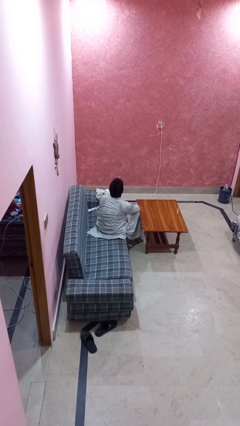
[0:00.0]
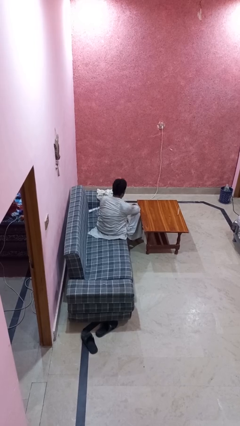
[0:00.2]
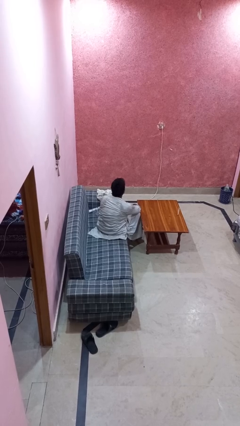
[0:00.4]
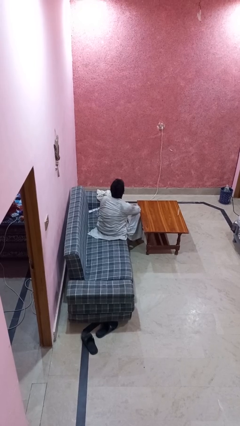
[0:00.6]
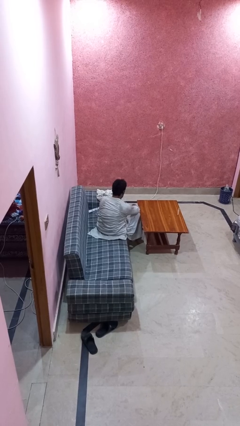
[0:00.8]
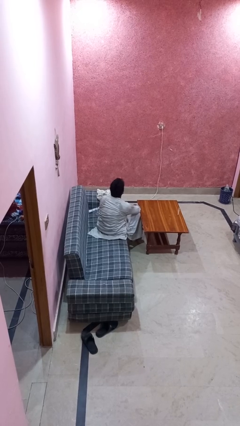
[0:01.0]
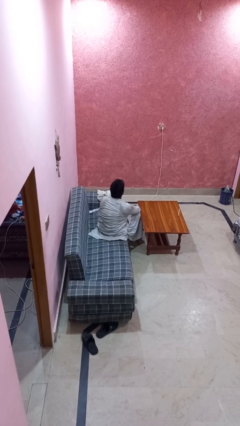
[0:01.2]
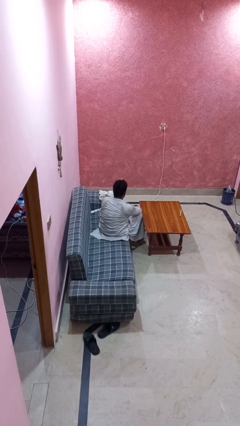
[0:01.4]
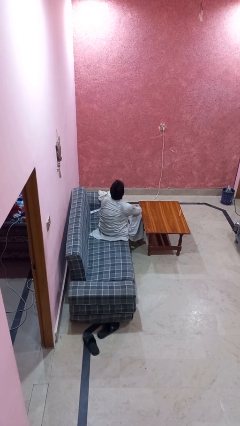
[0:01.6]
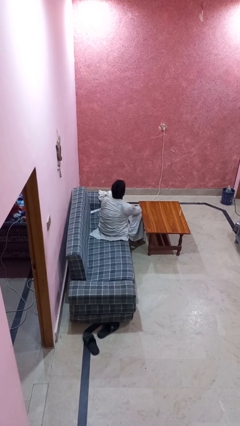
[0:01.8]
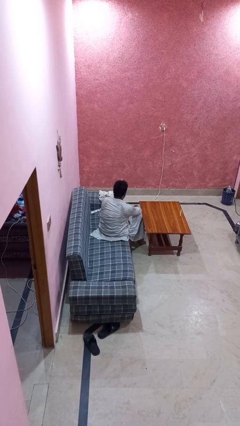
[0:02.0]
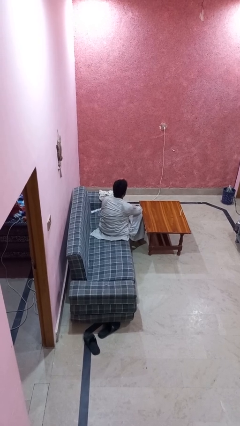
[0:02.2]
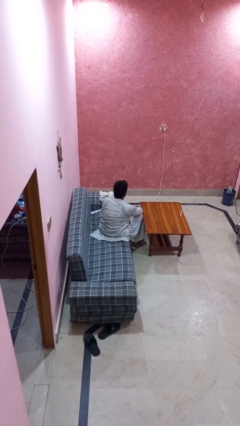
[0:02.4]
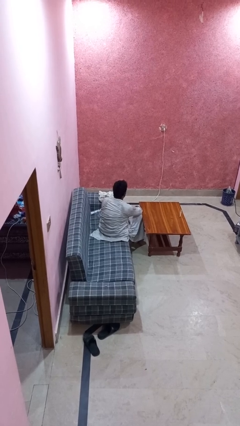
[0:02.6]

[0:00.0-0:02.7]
person nods head

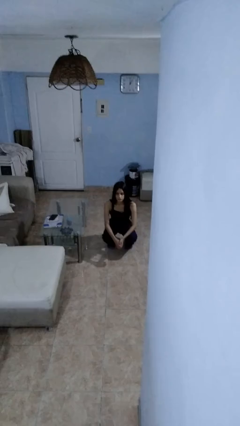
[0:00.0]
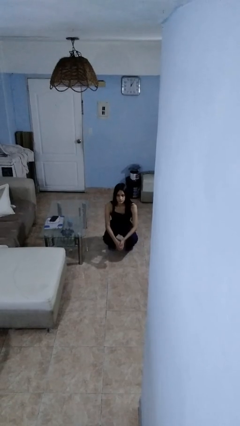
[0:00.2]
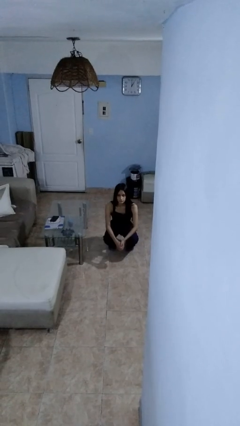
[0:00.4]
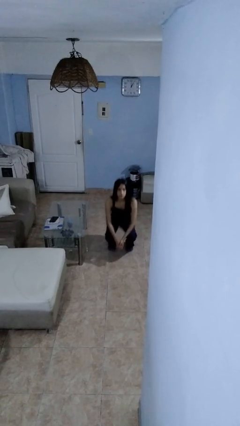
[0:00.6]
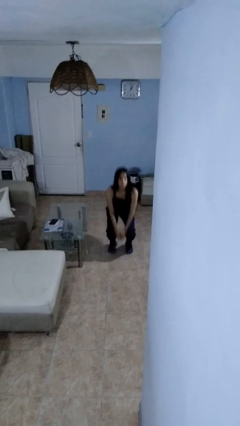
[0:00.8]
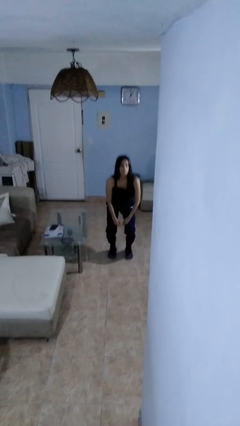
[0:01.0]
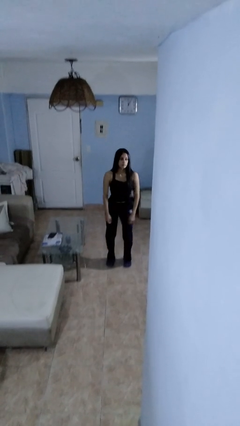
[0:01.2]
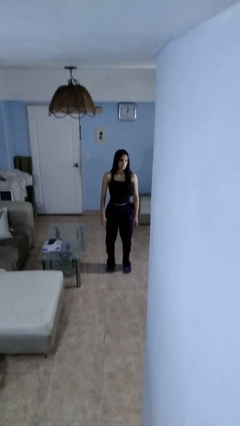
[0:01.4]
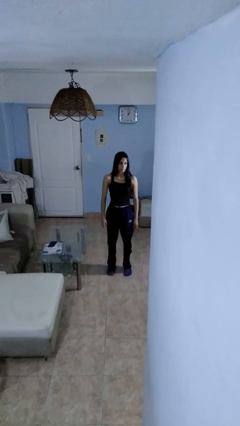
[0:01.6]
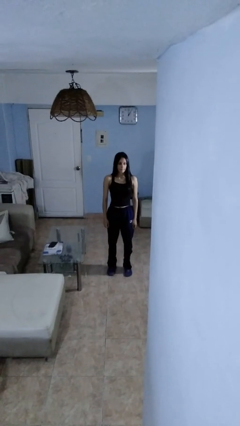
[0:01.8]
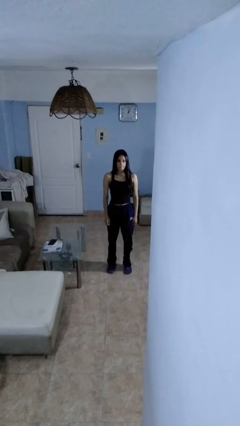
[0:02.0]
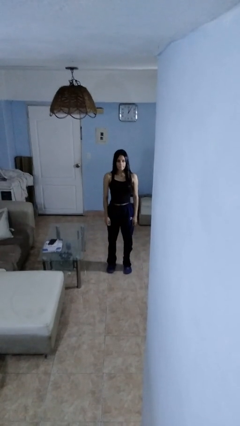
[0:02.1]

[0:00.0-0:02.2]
person stands up

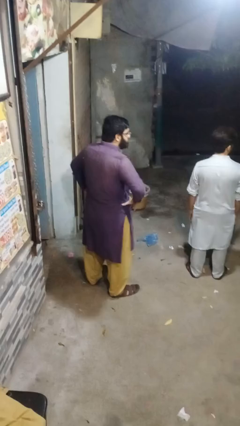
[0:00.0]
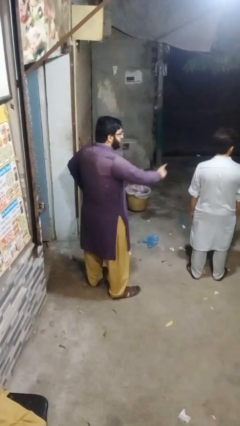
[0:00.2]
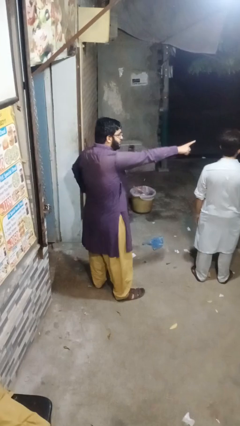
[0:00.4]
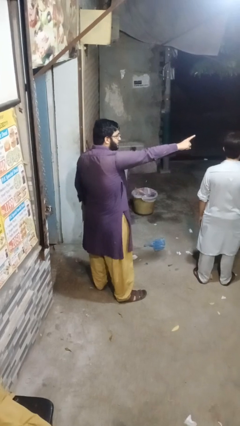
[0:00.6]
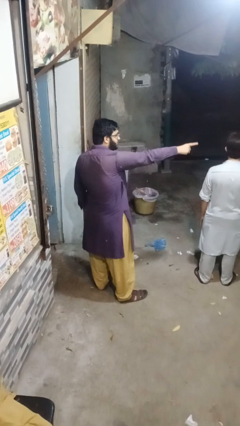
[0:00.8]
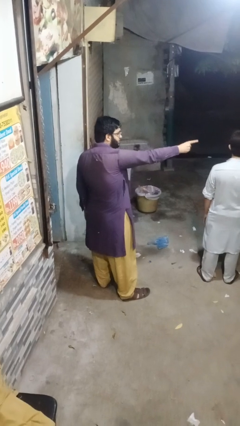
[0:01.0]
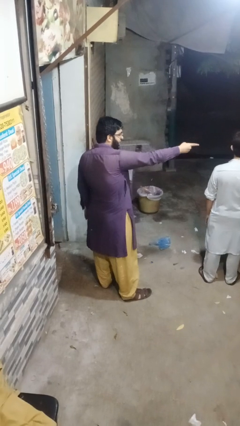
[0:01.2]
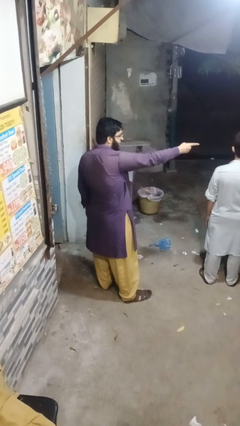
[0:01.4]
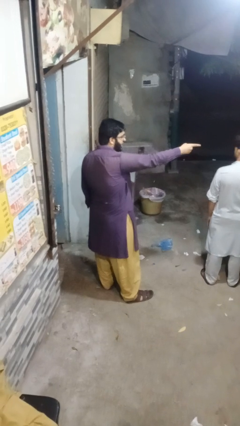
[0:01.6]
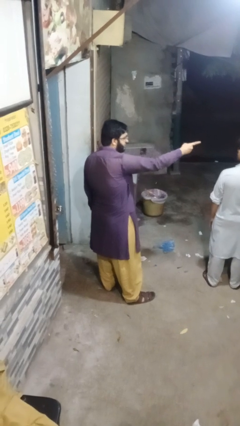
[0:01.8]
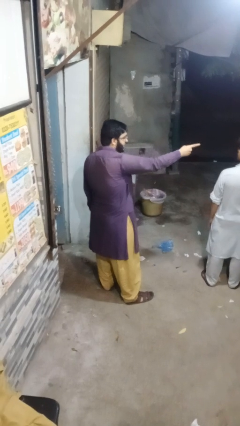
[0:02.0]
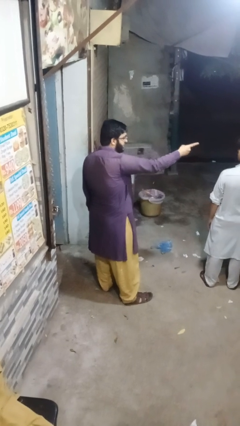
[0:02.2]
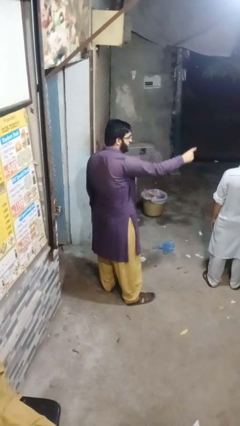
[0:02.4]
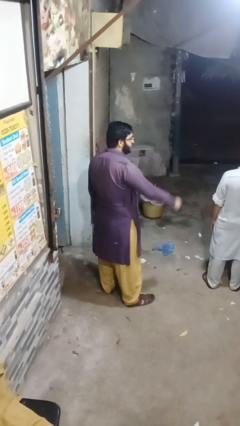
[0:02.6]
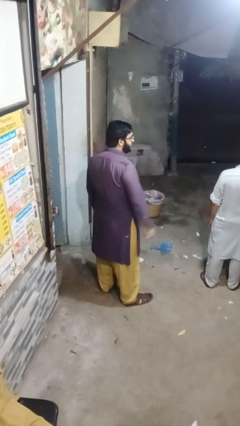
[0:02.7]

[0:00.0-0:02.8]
person points at person

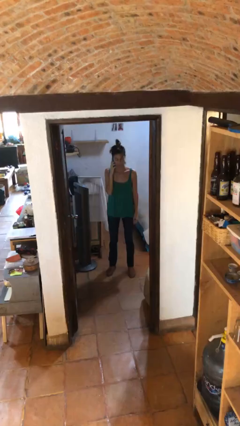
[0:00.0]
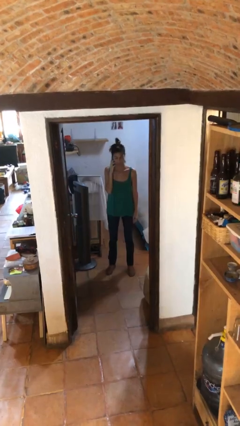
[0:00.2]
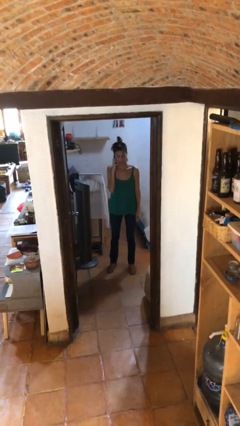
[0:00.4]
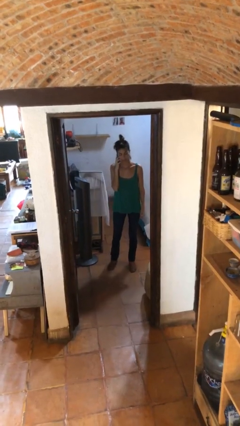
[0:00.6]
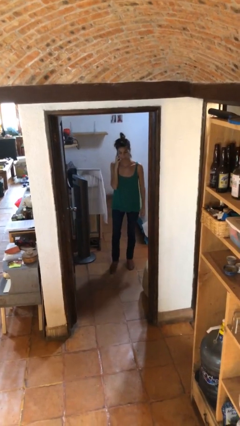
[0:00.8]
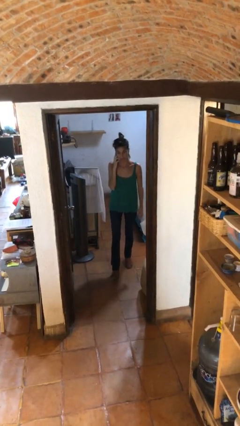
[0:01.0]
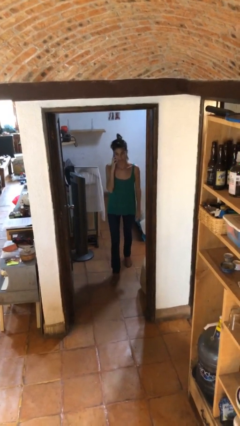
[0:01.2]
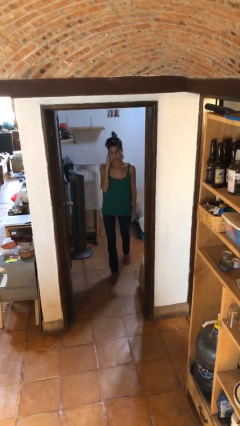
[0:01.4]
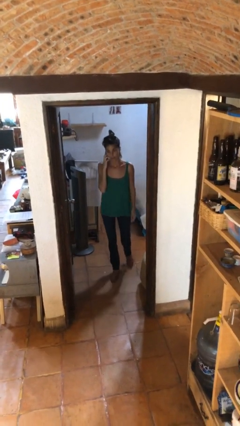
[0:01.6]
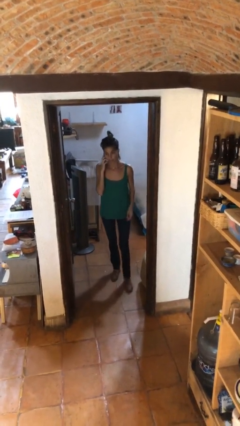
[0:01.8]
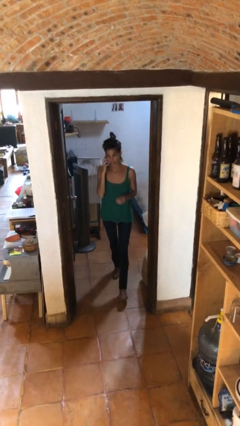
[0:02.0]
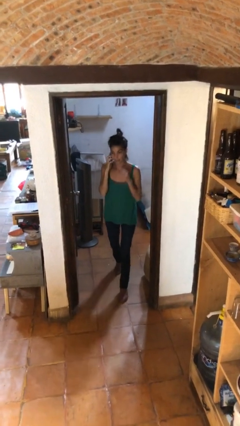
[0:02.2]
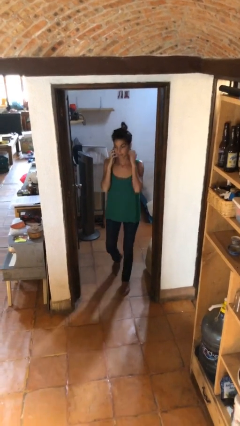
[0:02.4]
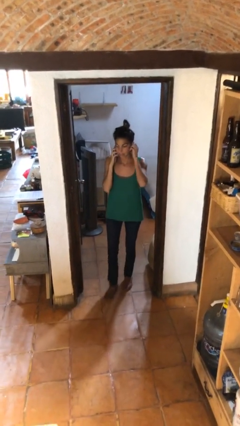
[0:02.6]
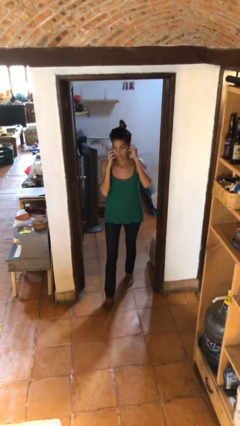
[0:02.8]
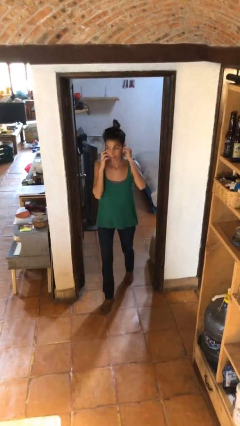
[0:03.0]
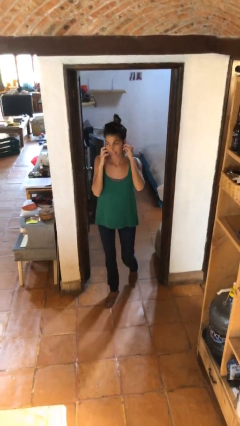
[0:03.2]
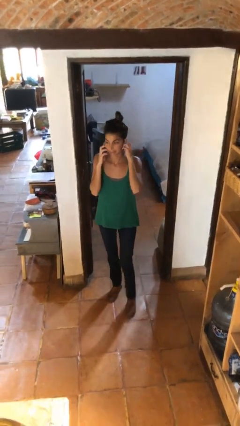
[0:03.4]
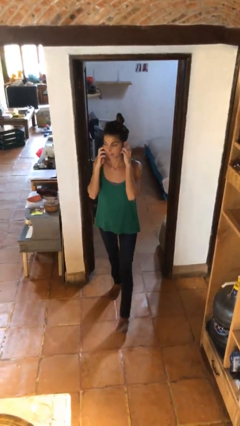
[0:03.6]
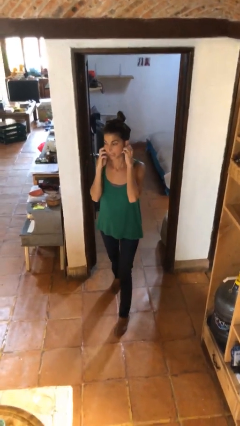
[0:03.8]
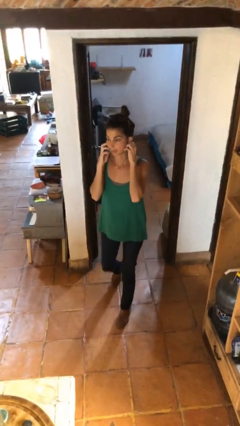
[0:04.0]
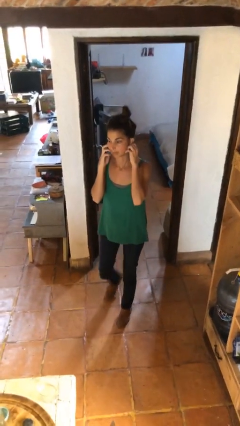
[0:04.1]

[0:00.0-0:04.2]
person enters scene through structure

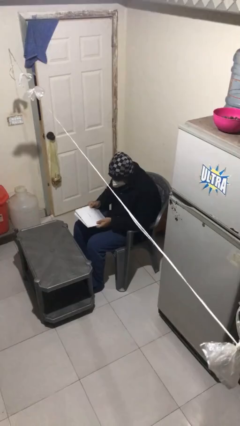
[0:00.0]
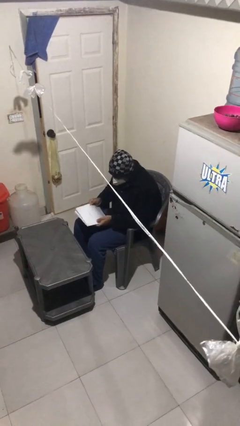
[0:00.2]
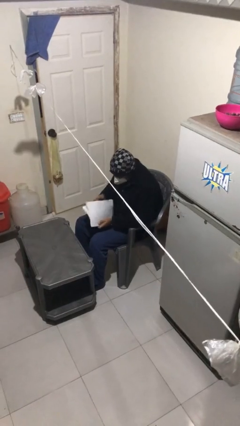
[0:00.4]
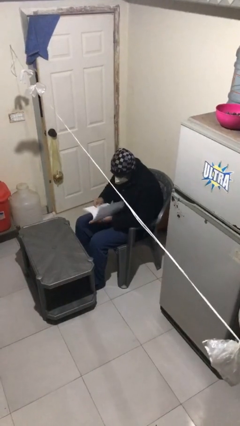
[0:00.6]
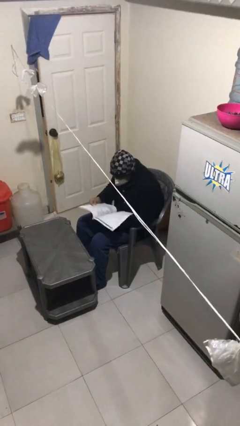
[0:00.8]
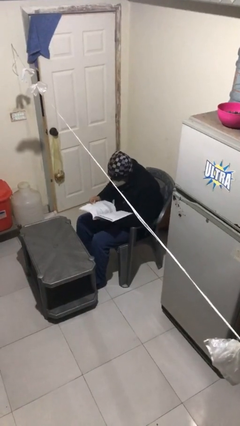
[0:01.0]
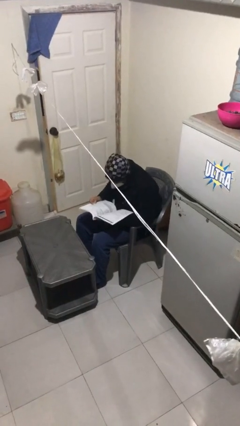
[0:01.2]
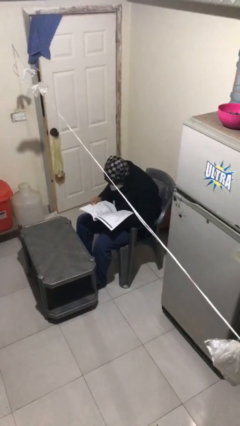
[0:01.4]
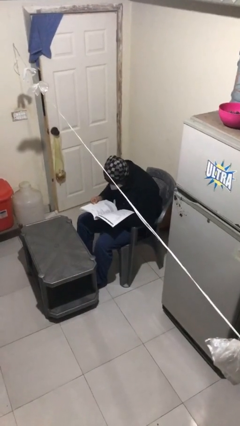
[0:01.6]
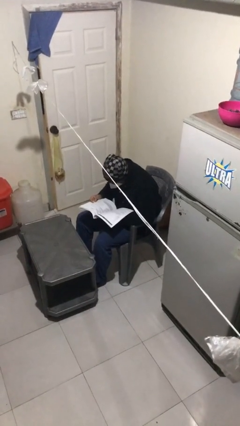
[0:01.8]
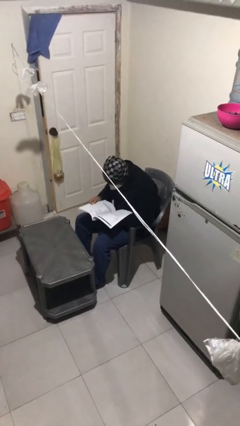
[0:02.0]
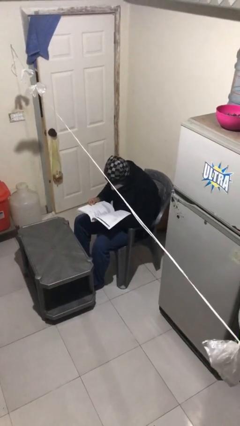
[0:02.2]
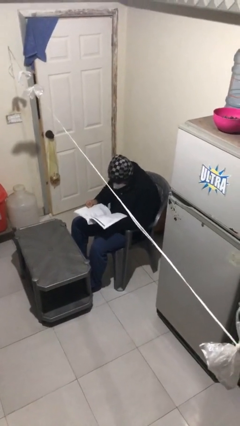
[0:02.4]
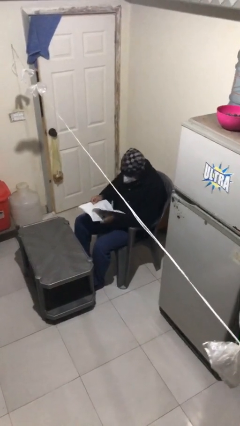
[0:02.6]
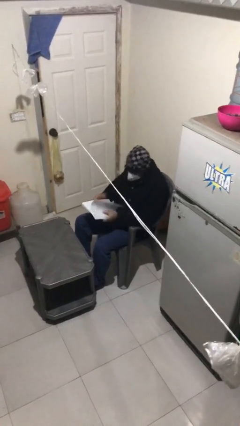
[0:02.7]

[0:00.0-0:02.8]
person reads document

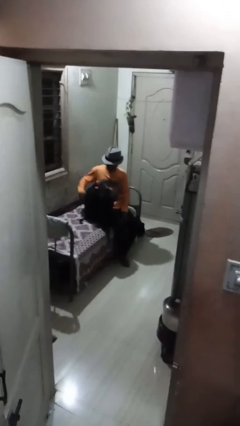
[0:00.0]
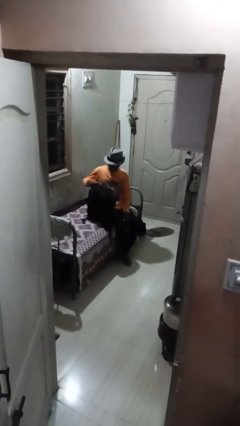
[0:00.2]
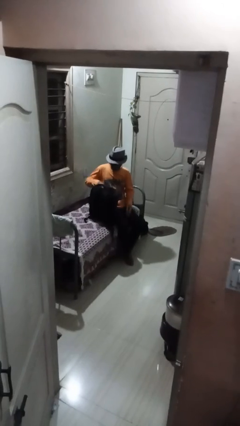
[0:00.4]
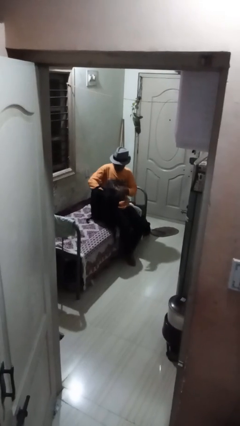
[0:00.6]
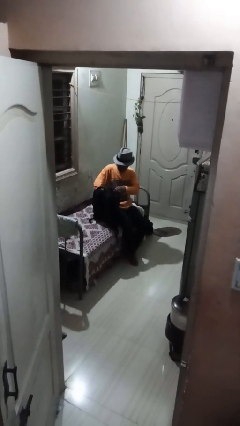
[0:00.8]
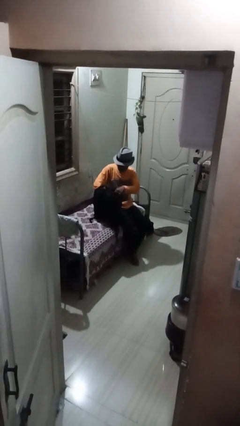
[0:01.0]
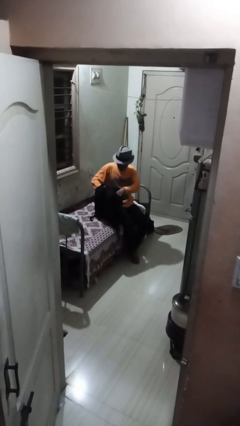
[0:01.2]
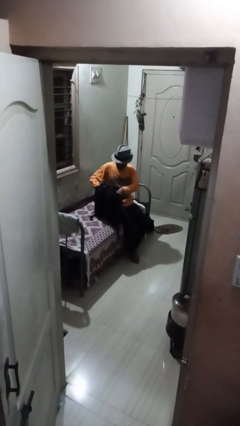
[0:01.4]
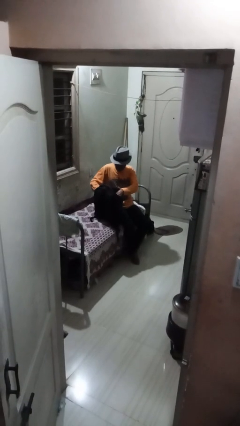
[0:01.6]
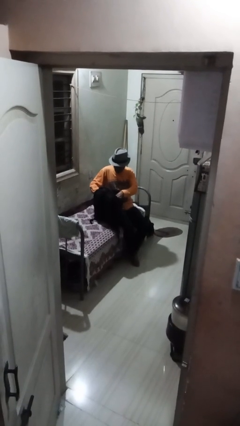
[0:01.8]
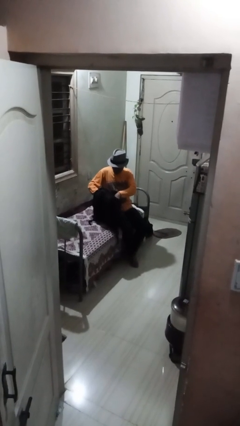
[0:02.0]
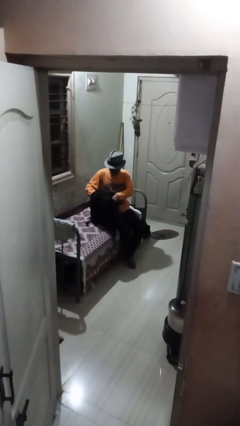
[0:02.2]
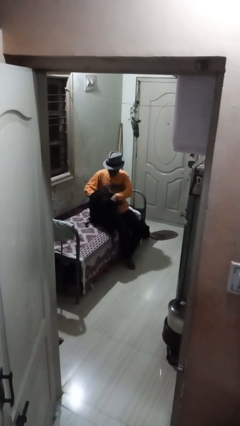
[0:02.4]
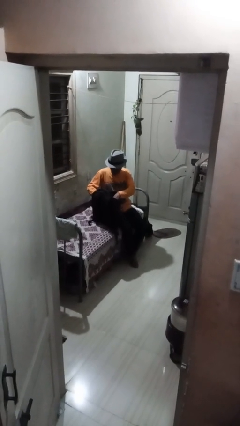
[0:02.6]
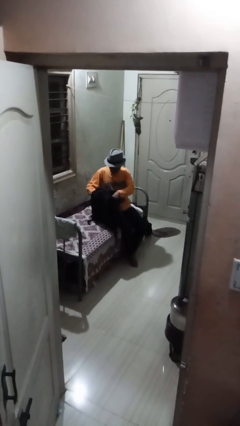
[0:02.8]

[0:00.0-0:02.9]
person searches in backpack
